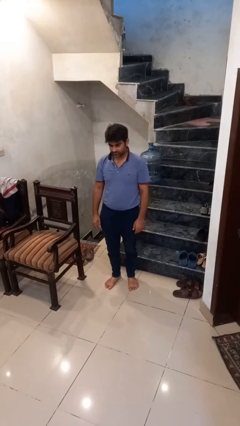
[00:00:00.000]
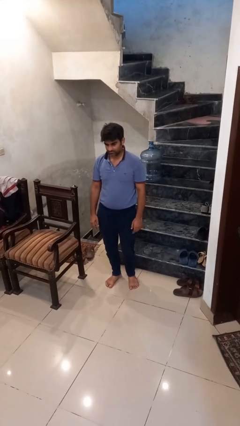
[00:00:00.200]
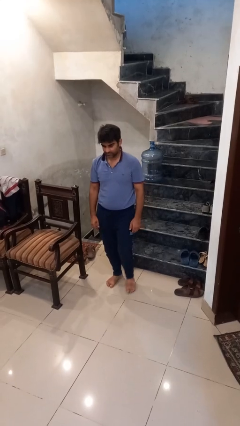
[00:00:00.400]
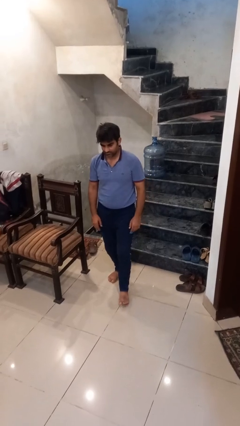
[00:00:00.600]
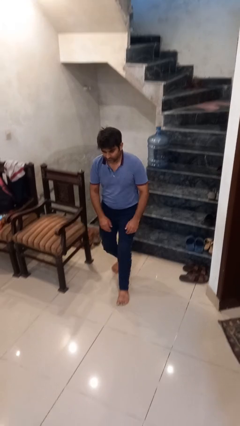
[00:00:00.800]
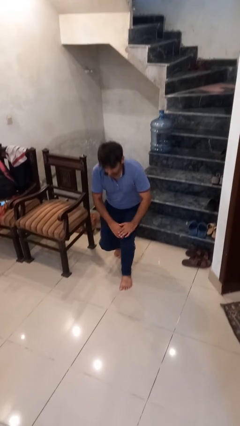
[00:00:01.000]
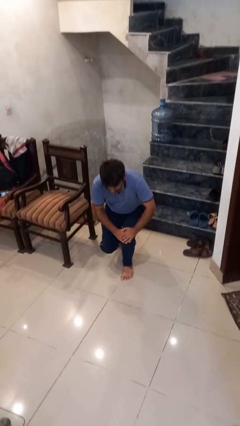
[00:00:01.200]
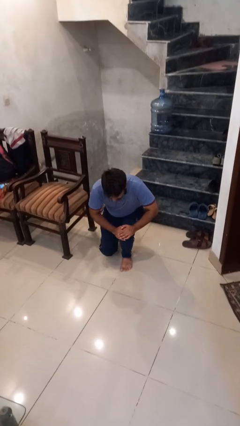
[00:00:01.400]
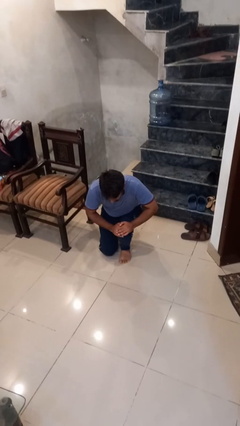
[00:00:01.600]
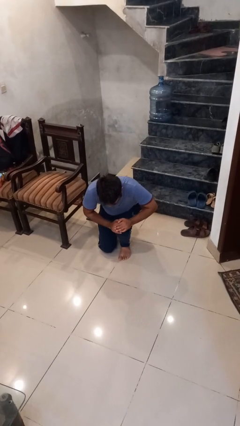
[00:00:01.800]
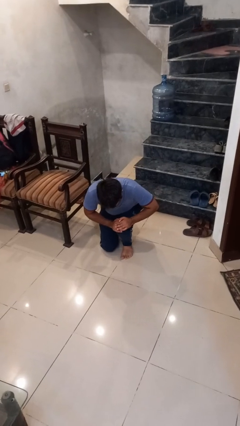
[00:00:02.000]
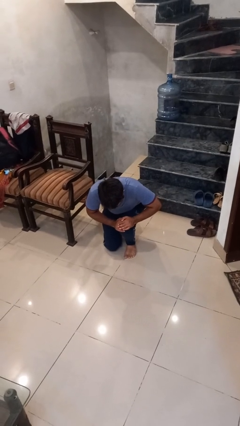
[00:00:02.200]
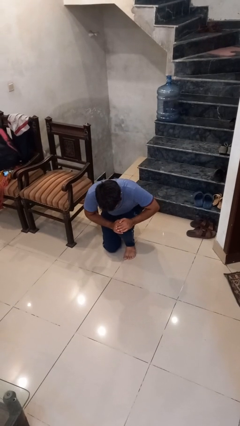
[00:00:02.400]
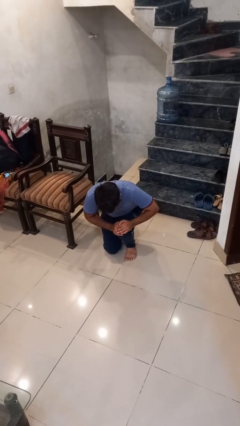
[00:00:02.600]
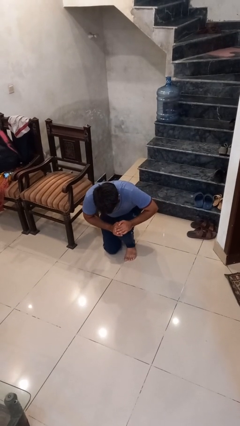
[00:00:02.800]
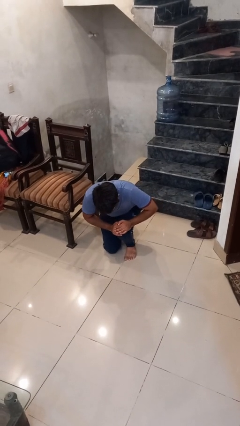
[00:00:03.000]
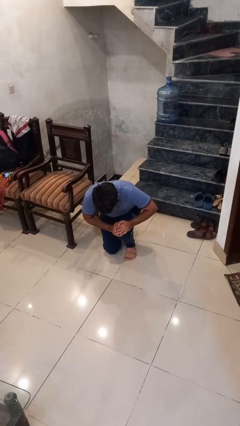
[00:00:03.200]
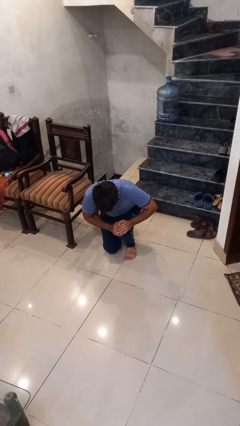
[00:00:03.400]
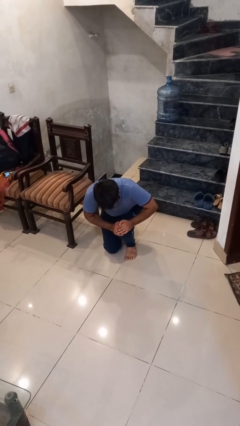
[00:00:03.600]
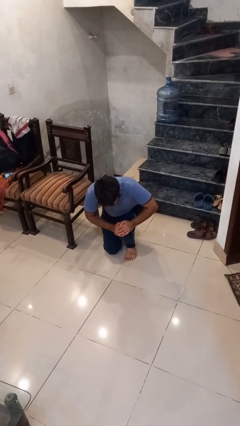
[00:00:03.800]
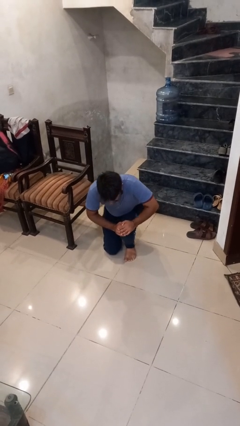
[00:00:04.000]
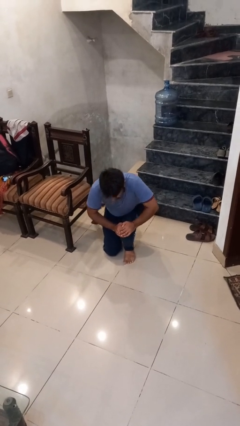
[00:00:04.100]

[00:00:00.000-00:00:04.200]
person kneels

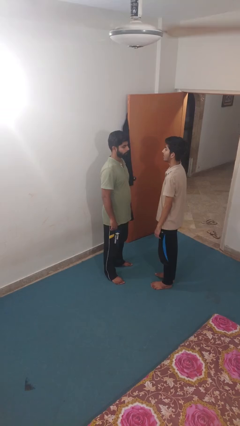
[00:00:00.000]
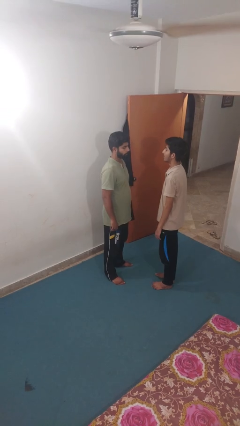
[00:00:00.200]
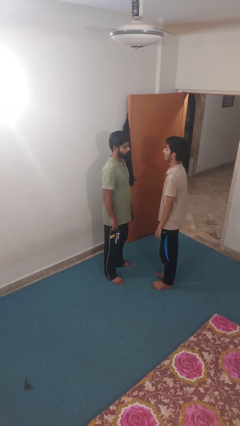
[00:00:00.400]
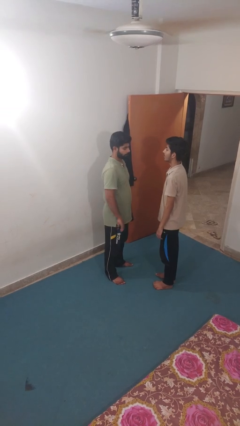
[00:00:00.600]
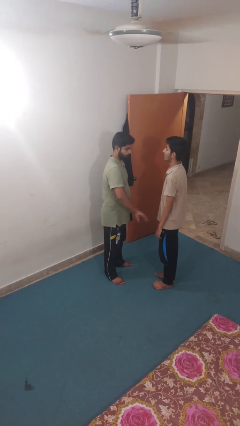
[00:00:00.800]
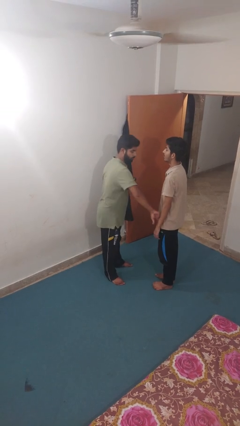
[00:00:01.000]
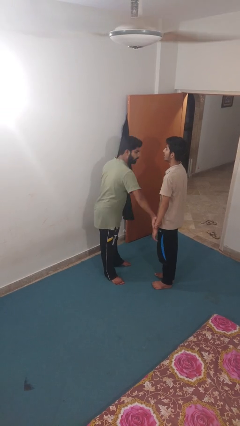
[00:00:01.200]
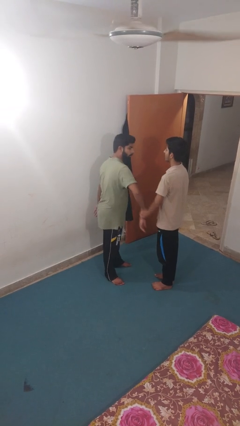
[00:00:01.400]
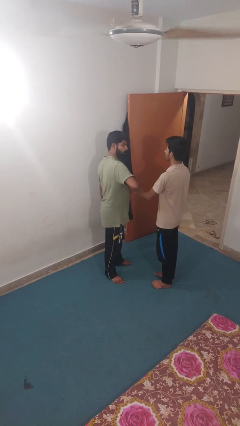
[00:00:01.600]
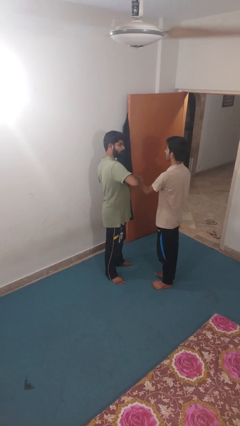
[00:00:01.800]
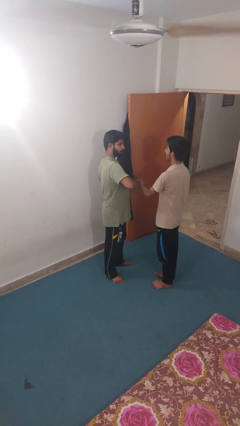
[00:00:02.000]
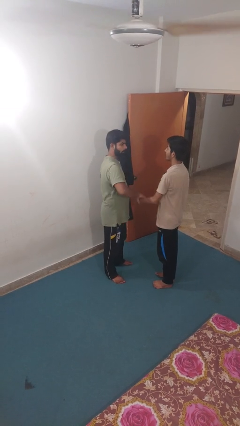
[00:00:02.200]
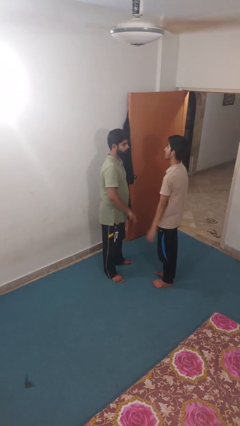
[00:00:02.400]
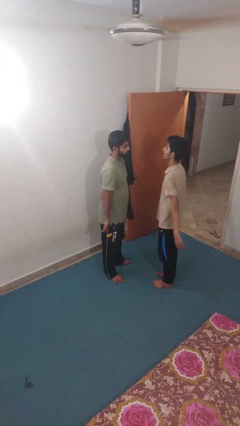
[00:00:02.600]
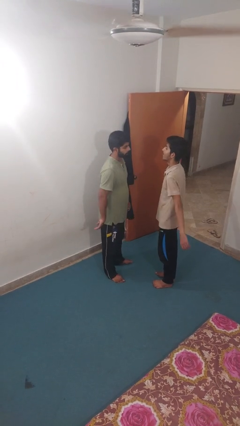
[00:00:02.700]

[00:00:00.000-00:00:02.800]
person grabs person by forearm

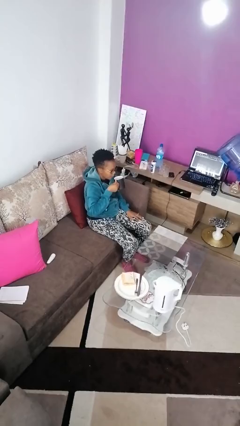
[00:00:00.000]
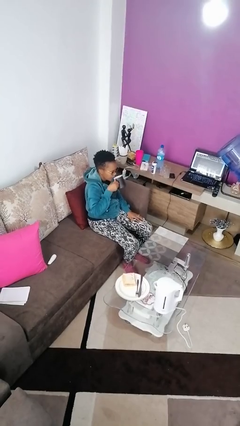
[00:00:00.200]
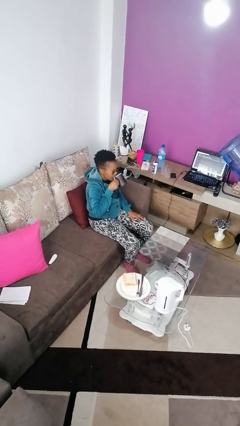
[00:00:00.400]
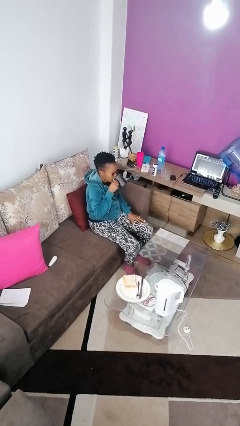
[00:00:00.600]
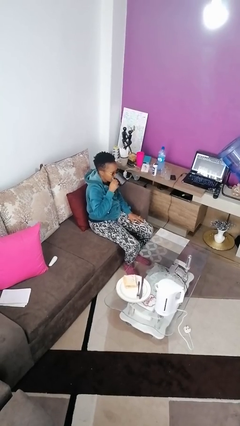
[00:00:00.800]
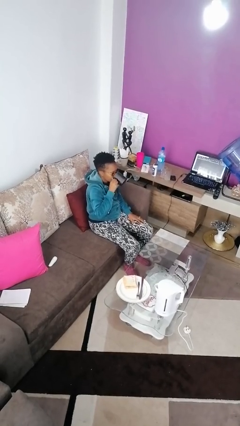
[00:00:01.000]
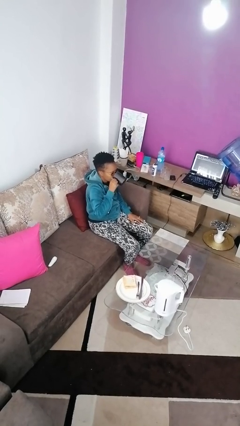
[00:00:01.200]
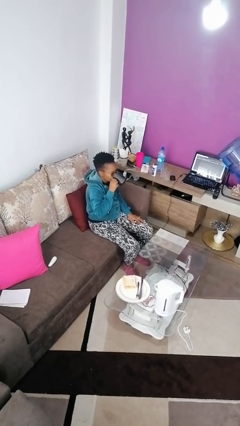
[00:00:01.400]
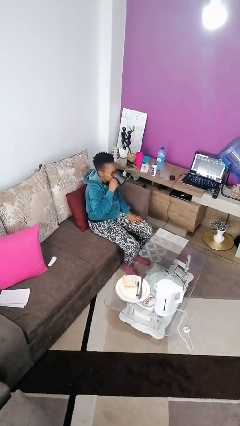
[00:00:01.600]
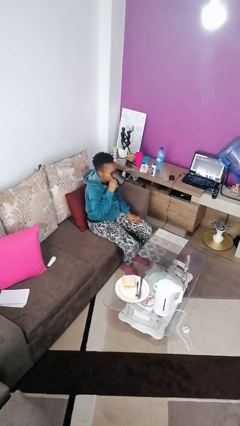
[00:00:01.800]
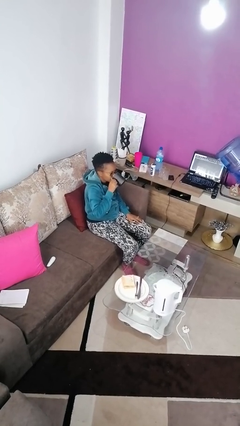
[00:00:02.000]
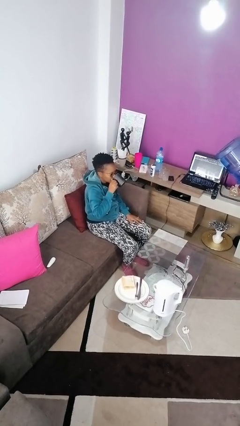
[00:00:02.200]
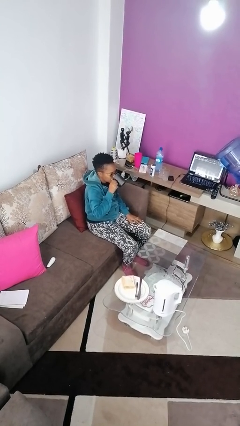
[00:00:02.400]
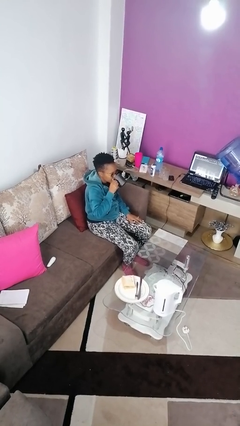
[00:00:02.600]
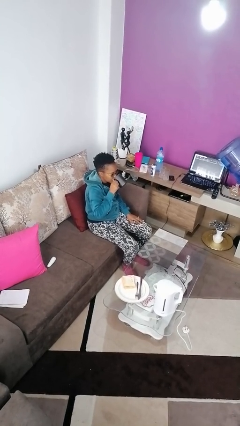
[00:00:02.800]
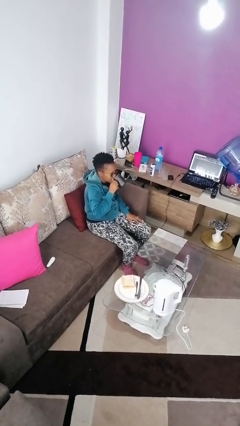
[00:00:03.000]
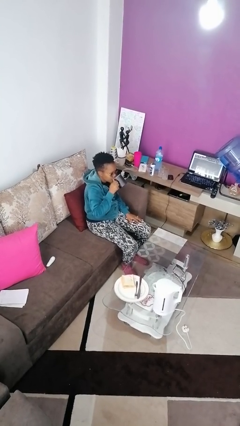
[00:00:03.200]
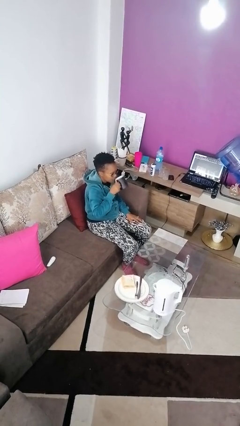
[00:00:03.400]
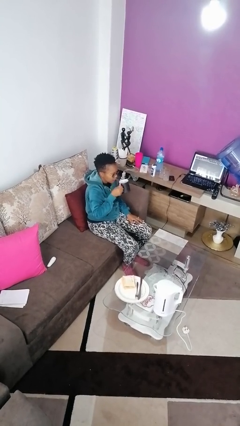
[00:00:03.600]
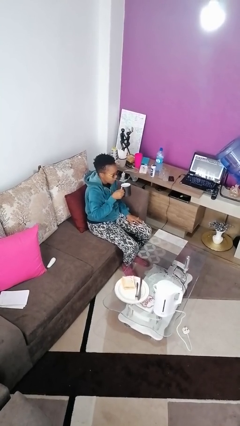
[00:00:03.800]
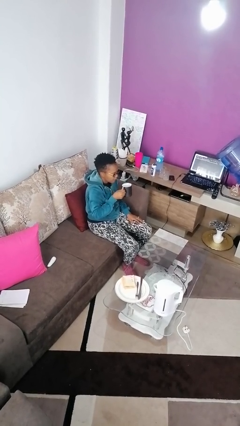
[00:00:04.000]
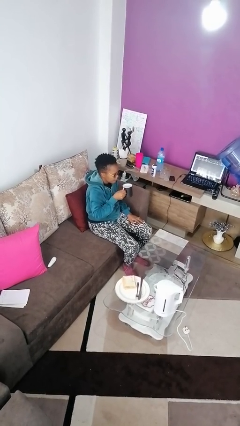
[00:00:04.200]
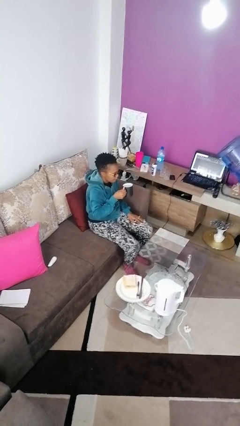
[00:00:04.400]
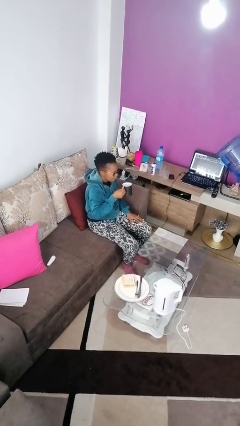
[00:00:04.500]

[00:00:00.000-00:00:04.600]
person drinks from mug

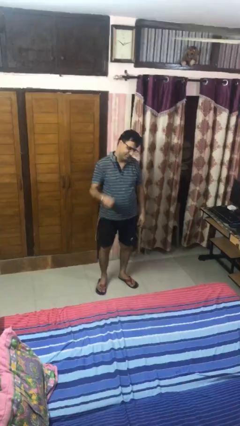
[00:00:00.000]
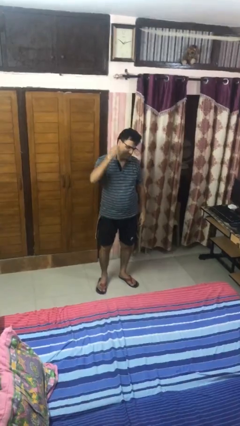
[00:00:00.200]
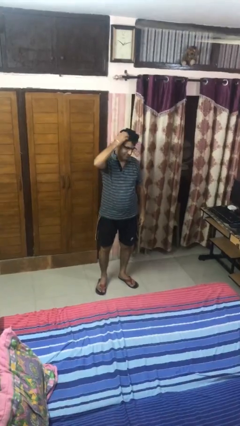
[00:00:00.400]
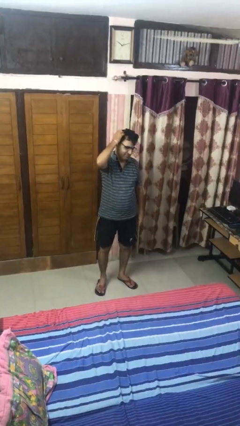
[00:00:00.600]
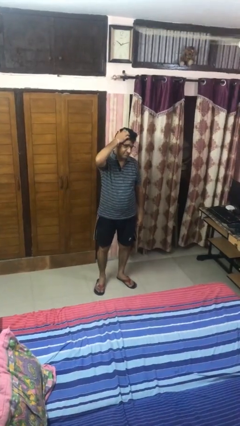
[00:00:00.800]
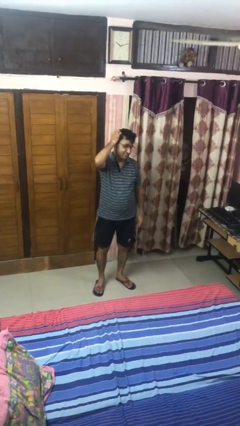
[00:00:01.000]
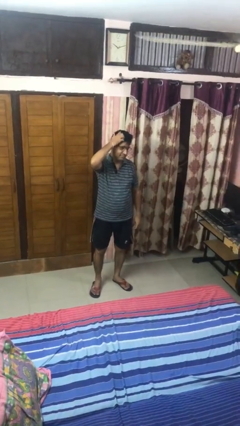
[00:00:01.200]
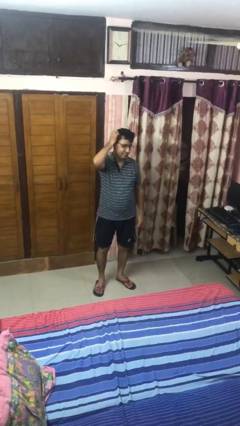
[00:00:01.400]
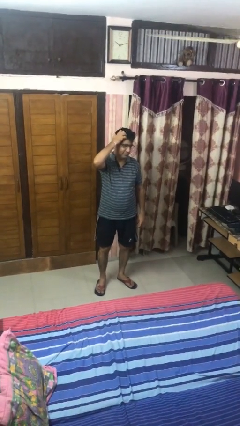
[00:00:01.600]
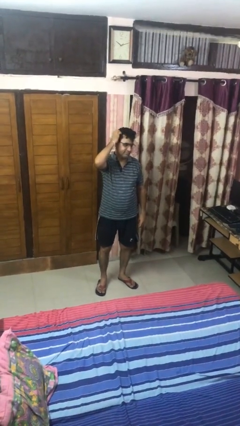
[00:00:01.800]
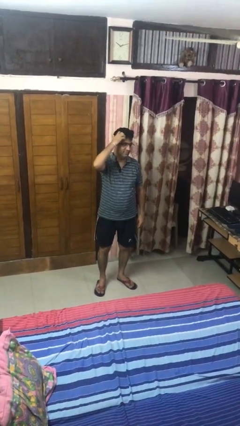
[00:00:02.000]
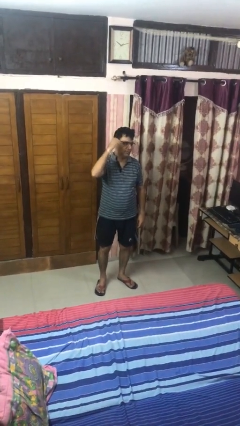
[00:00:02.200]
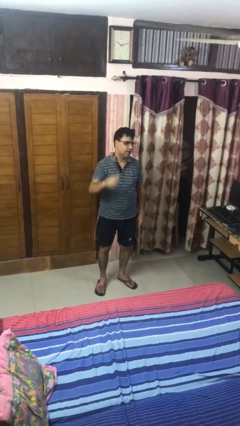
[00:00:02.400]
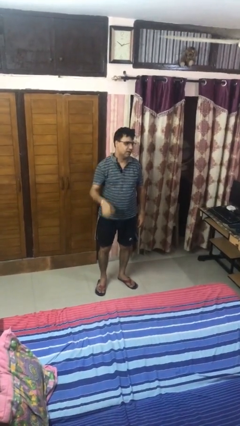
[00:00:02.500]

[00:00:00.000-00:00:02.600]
person scratches face

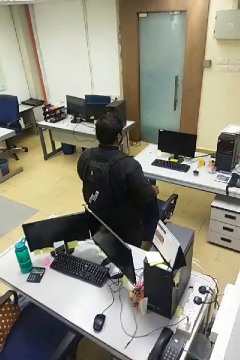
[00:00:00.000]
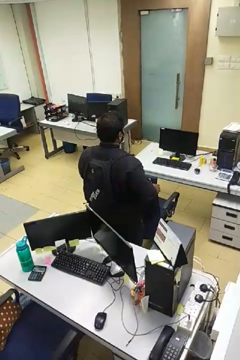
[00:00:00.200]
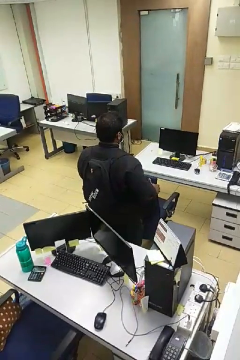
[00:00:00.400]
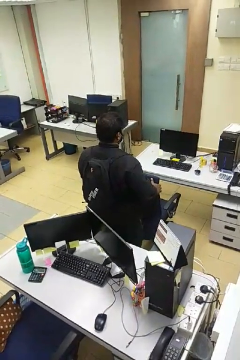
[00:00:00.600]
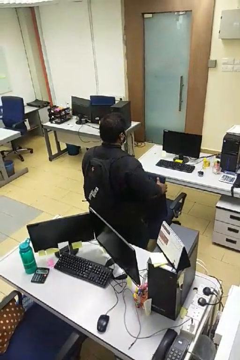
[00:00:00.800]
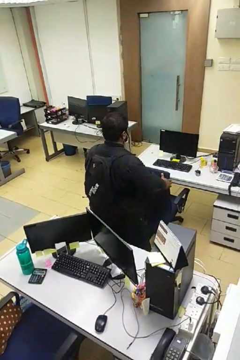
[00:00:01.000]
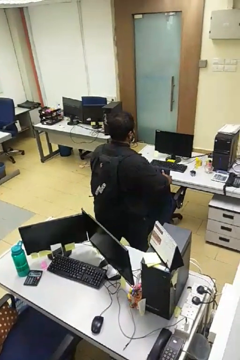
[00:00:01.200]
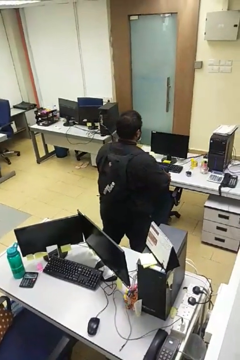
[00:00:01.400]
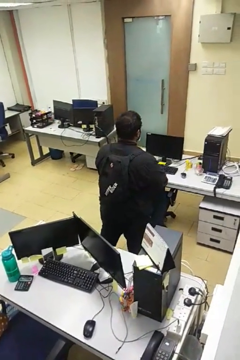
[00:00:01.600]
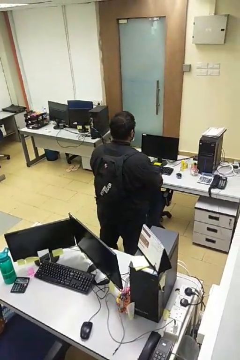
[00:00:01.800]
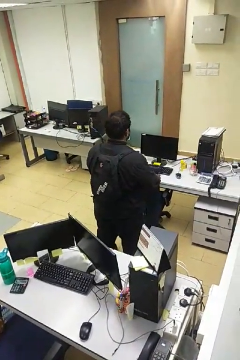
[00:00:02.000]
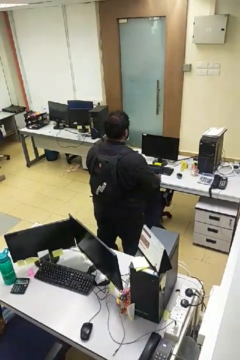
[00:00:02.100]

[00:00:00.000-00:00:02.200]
person pushes in chair

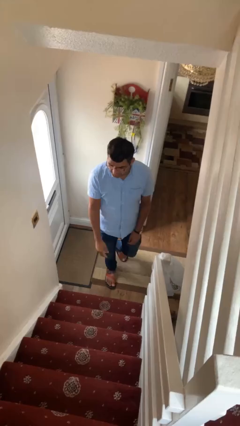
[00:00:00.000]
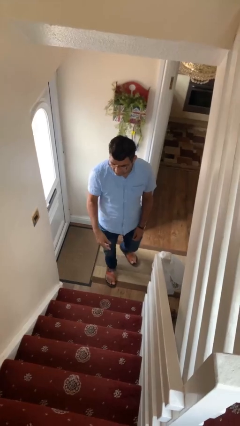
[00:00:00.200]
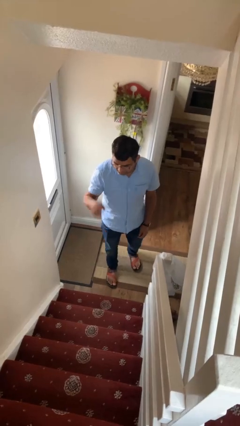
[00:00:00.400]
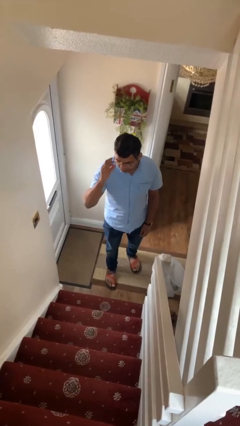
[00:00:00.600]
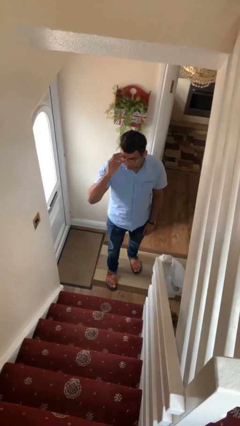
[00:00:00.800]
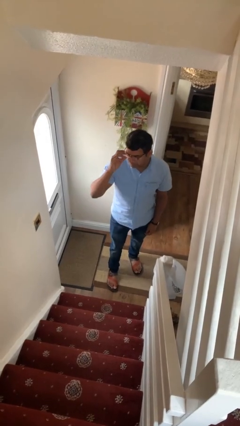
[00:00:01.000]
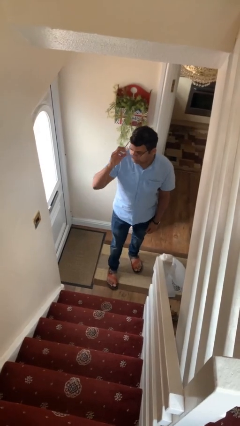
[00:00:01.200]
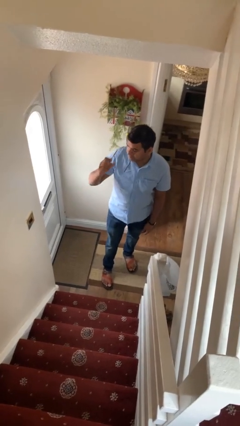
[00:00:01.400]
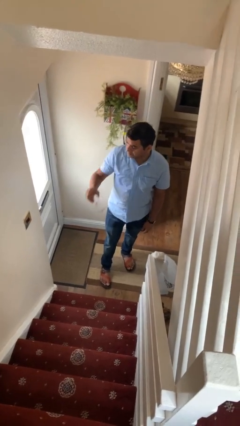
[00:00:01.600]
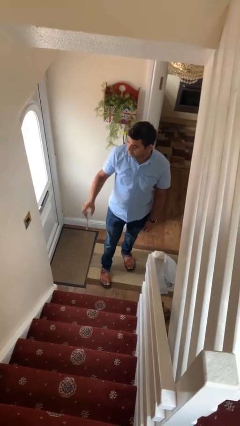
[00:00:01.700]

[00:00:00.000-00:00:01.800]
person takes off glasses
